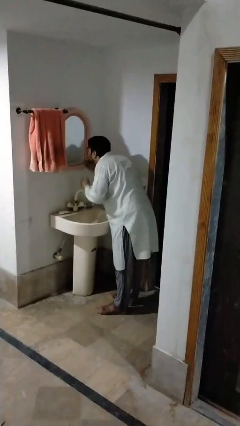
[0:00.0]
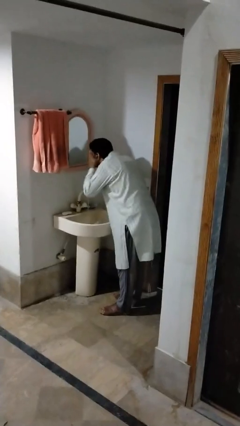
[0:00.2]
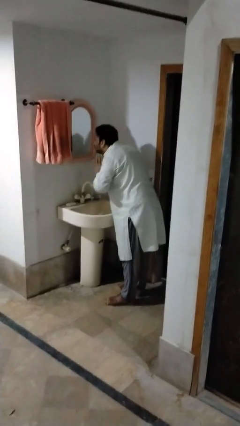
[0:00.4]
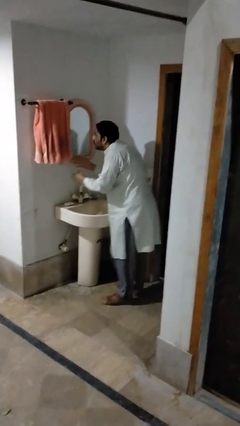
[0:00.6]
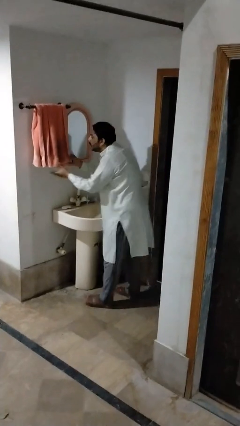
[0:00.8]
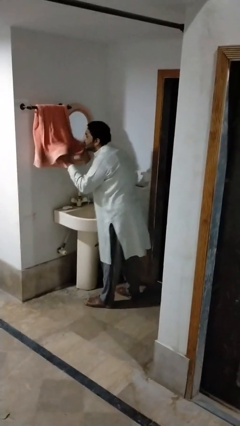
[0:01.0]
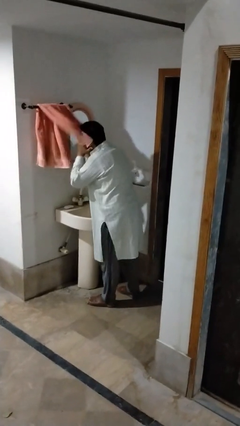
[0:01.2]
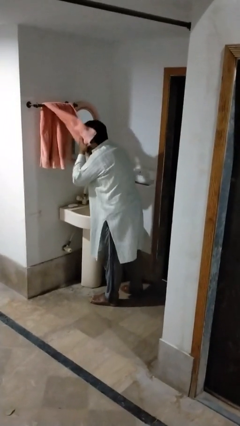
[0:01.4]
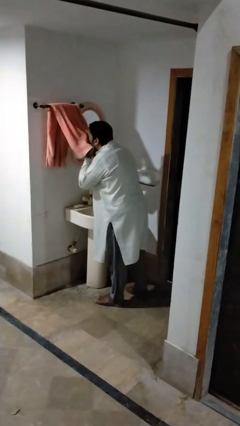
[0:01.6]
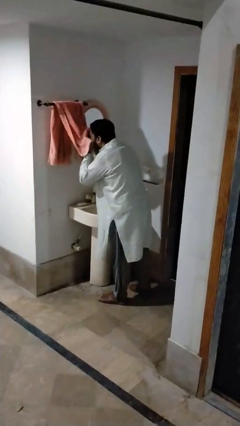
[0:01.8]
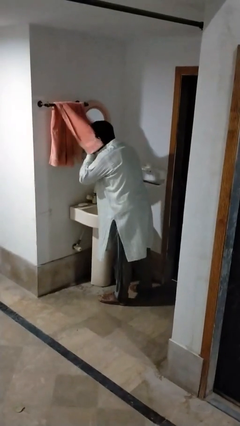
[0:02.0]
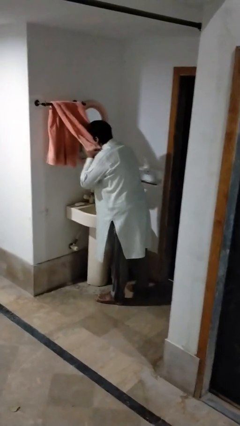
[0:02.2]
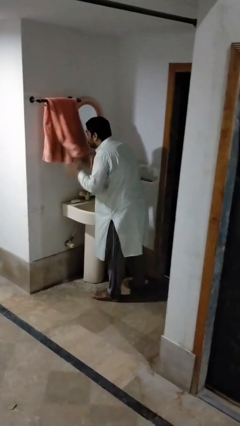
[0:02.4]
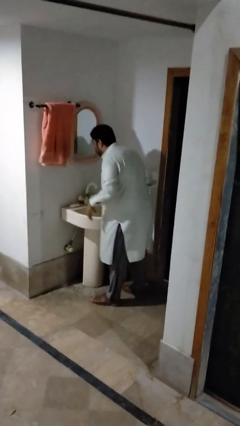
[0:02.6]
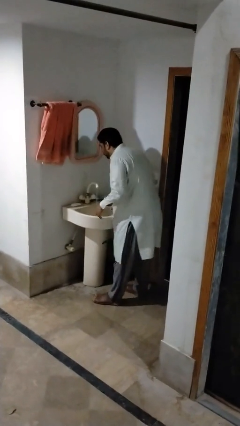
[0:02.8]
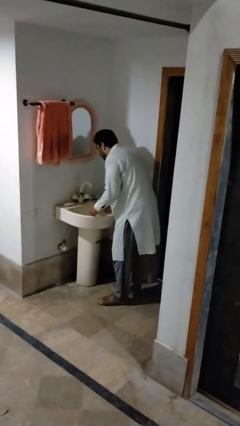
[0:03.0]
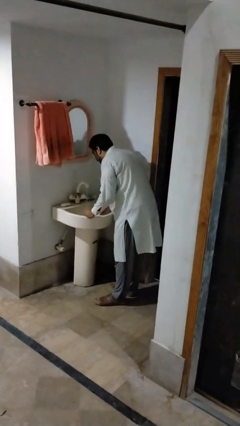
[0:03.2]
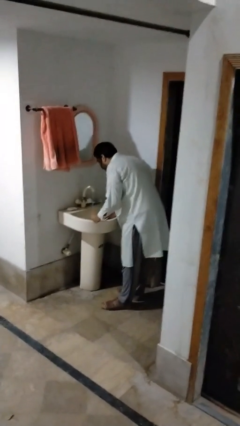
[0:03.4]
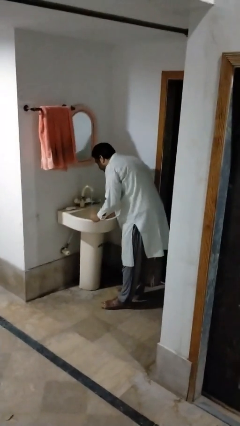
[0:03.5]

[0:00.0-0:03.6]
person dries face with towel

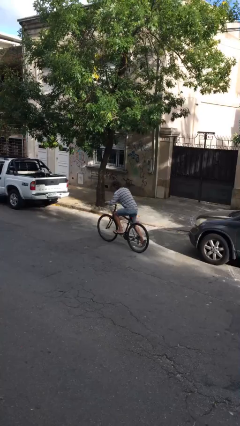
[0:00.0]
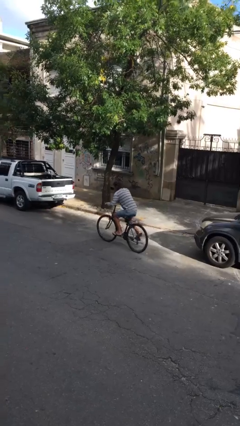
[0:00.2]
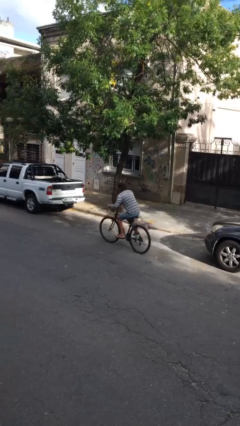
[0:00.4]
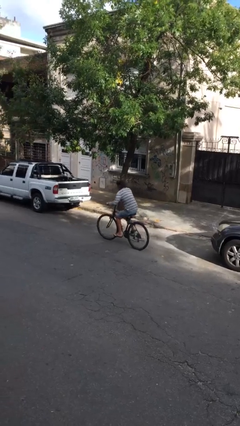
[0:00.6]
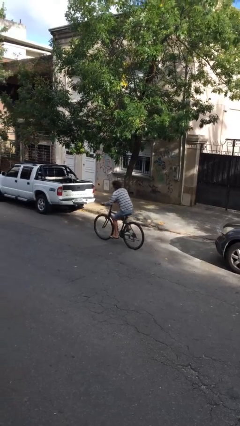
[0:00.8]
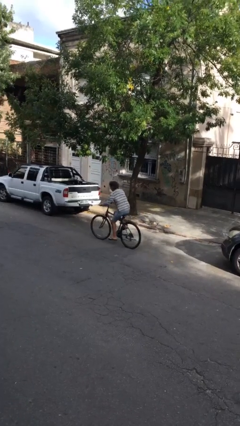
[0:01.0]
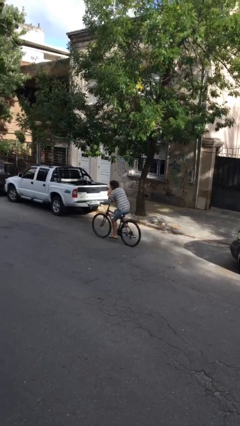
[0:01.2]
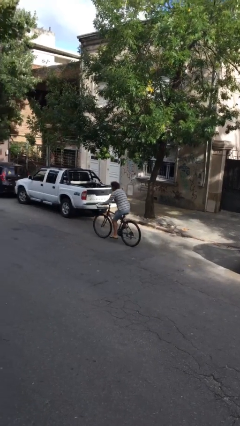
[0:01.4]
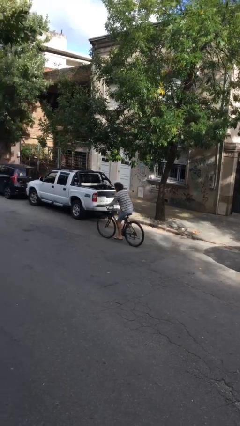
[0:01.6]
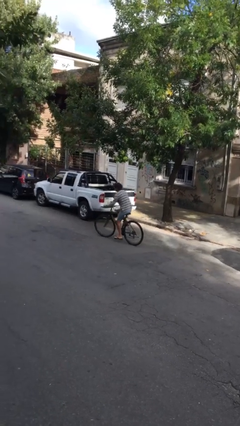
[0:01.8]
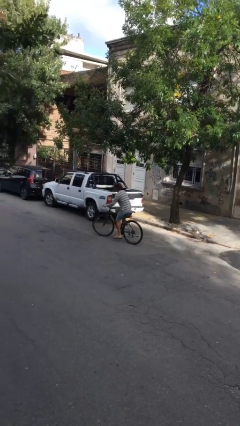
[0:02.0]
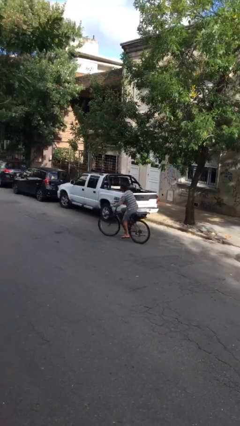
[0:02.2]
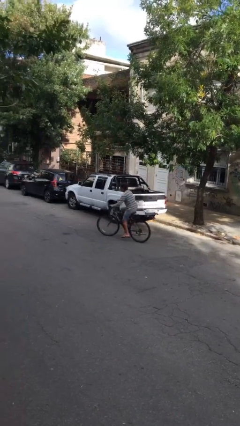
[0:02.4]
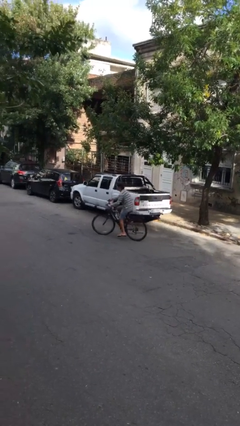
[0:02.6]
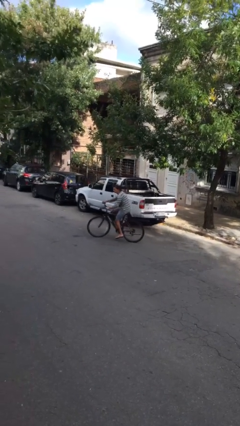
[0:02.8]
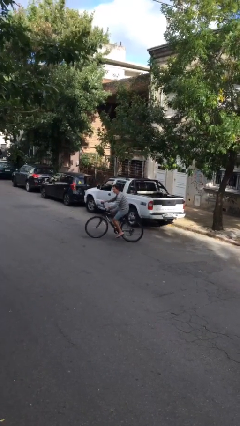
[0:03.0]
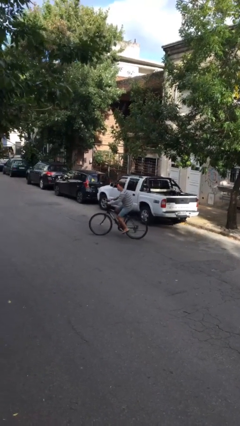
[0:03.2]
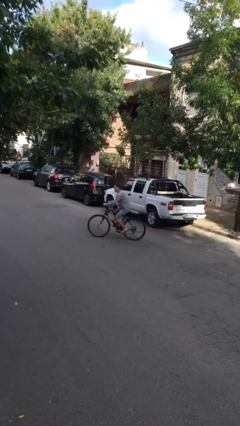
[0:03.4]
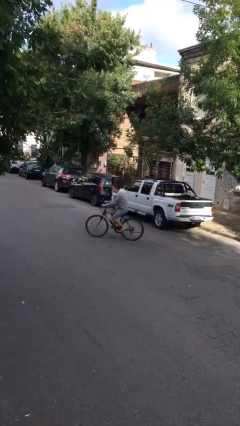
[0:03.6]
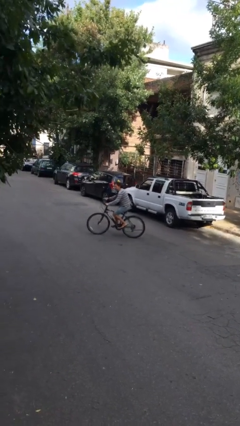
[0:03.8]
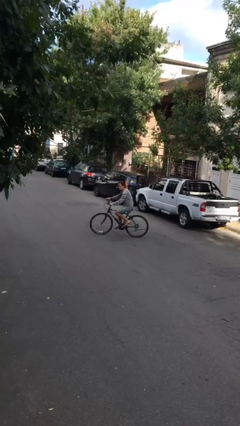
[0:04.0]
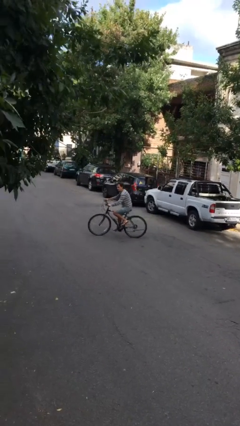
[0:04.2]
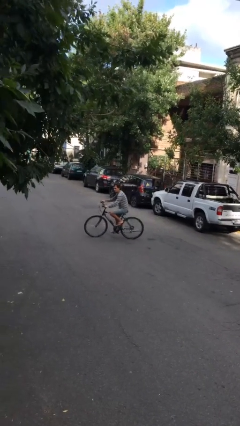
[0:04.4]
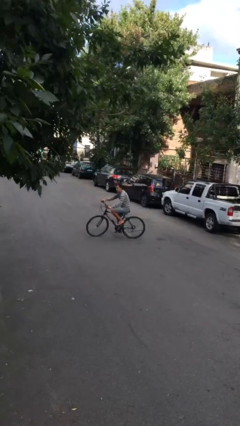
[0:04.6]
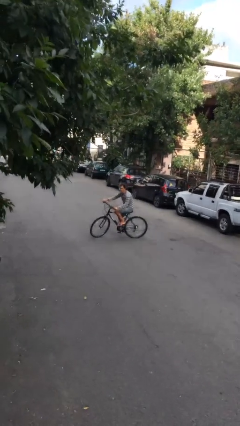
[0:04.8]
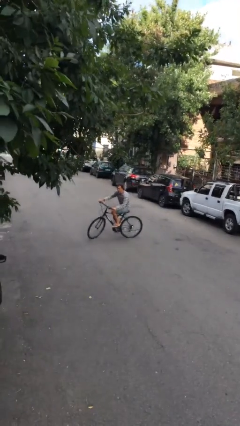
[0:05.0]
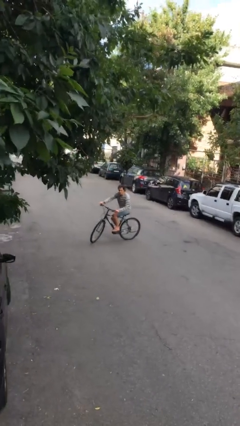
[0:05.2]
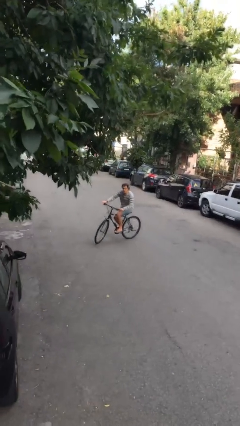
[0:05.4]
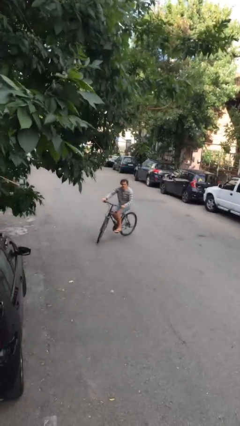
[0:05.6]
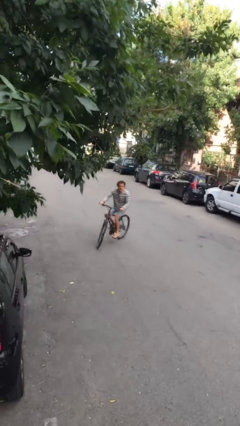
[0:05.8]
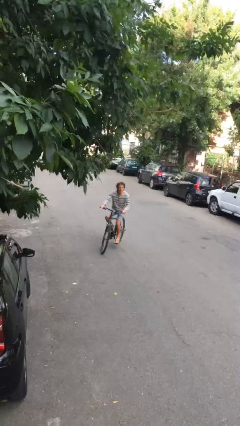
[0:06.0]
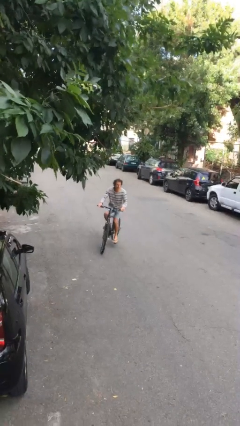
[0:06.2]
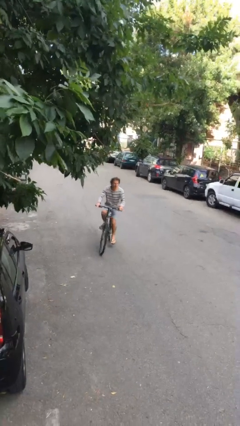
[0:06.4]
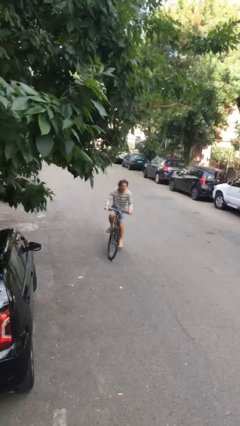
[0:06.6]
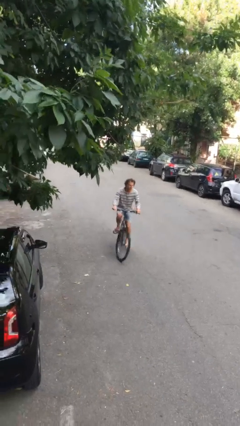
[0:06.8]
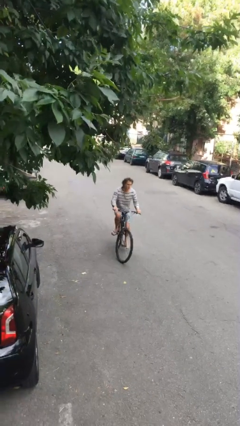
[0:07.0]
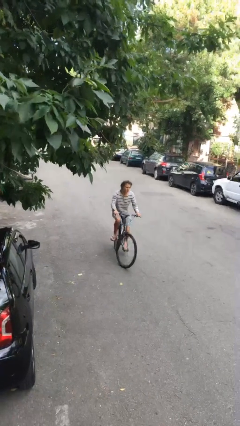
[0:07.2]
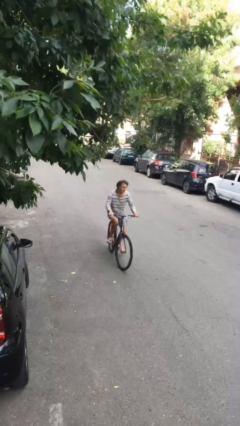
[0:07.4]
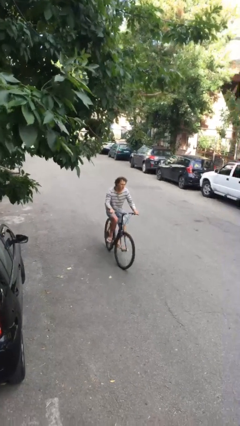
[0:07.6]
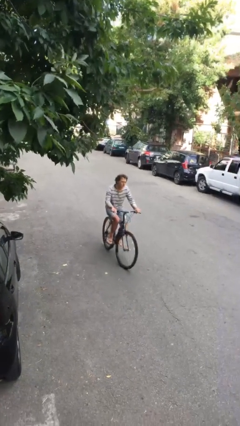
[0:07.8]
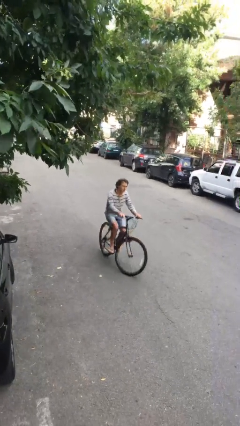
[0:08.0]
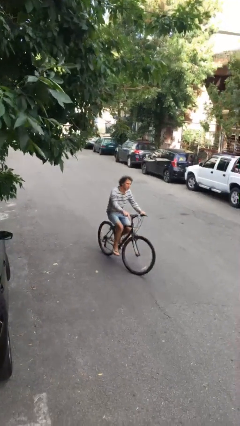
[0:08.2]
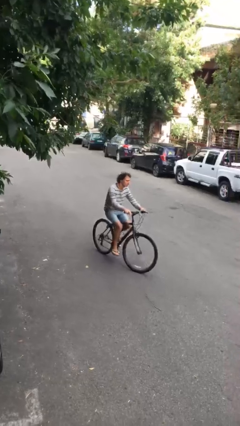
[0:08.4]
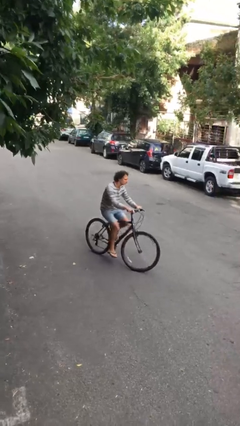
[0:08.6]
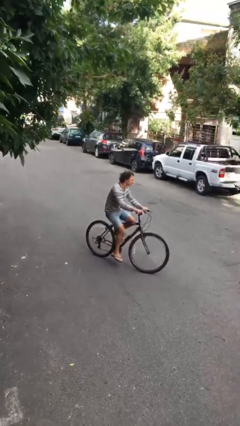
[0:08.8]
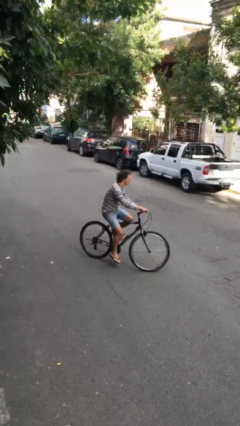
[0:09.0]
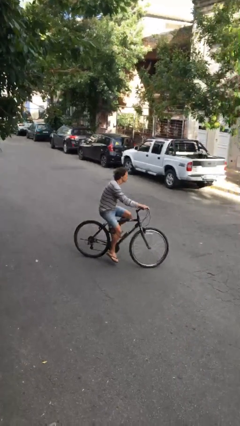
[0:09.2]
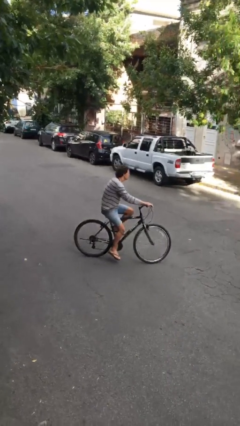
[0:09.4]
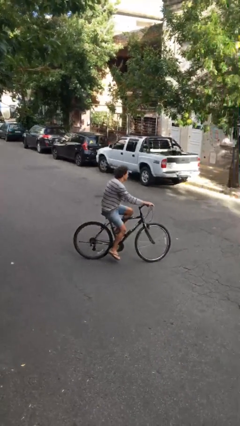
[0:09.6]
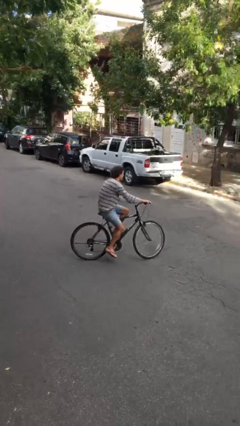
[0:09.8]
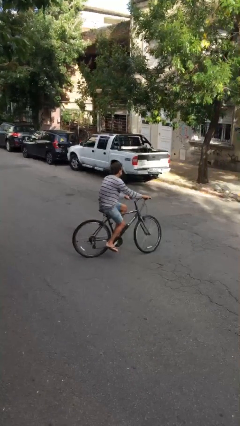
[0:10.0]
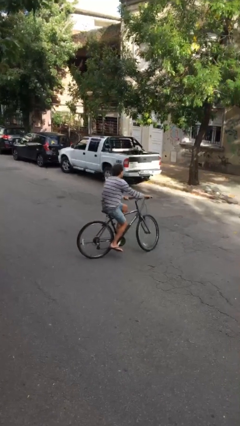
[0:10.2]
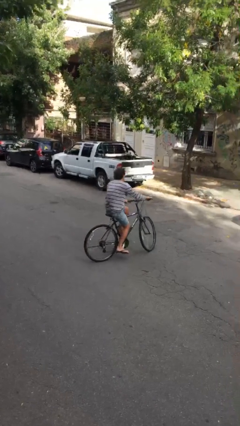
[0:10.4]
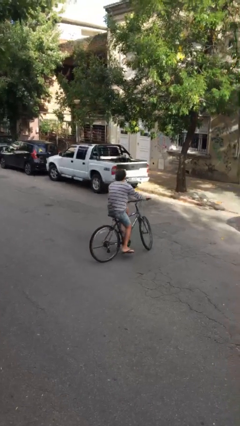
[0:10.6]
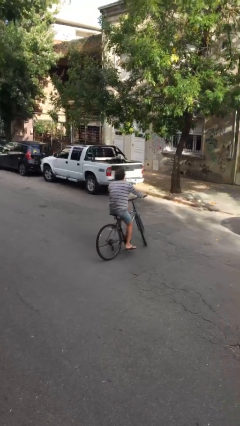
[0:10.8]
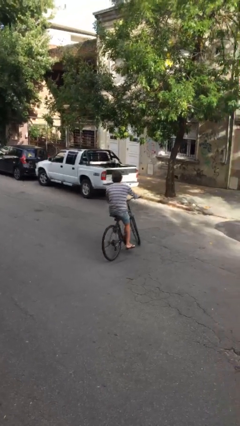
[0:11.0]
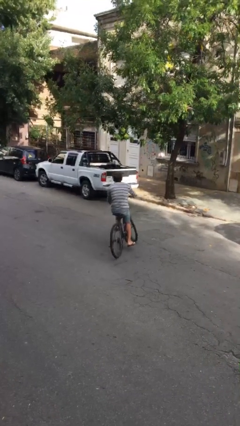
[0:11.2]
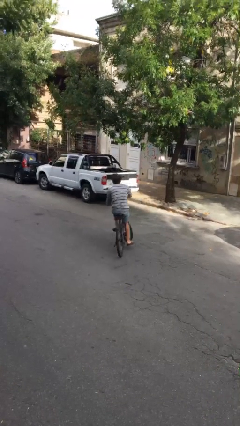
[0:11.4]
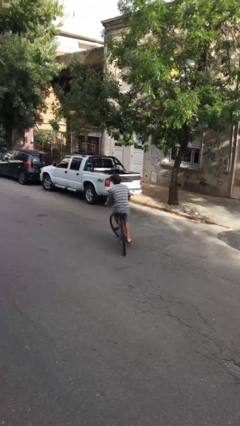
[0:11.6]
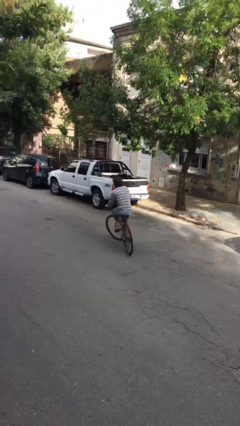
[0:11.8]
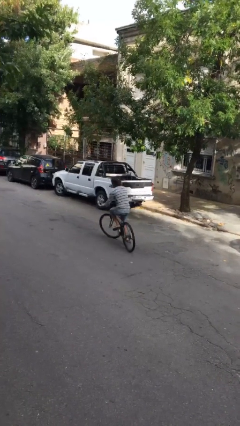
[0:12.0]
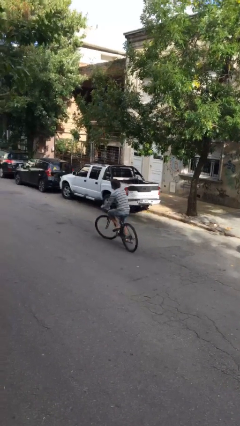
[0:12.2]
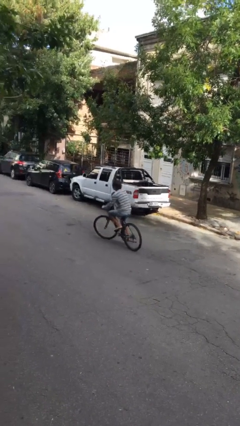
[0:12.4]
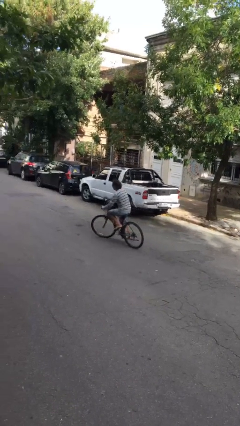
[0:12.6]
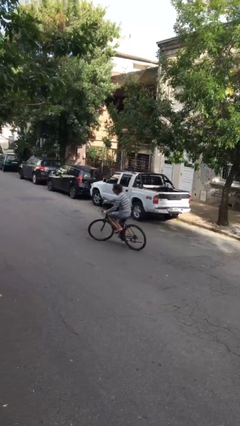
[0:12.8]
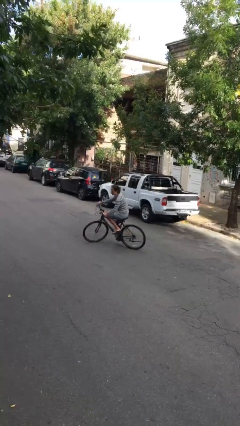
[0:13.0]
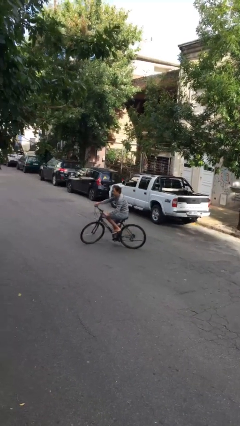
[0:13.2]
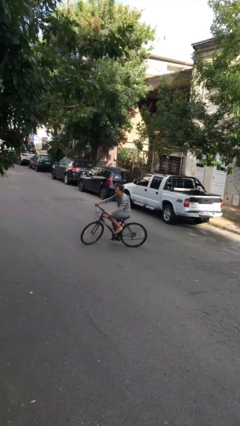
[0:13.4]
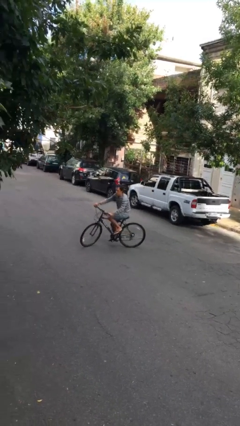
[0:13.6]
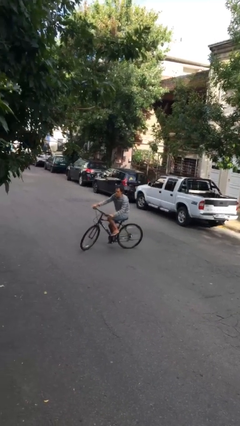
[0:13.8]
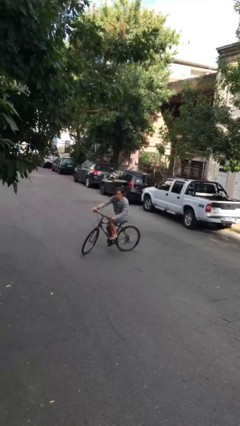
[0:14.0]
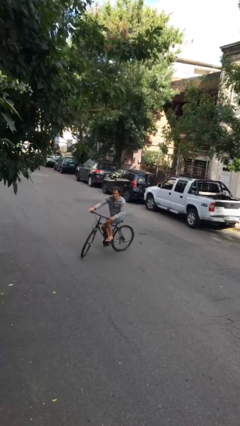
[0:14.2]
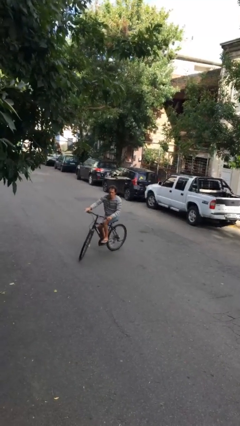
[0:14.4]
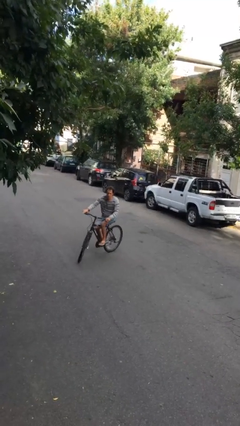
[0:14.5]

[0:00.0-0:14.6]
person rides bicycle
